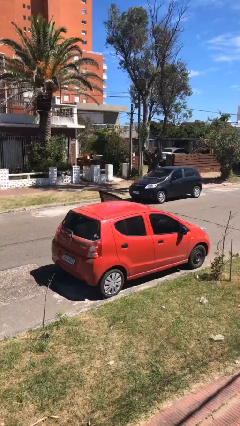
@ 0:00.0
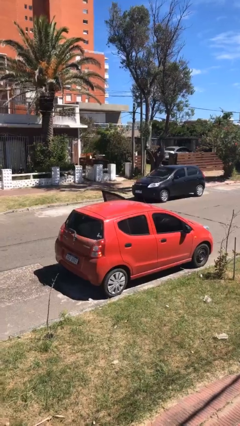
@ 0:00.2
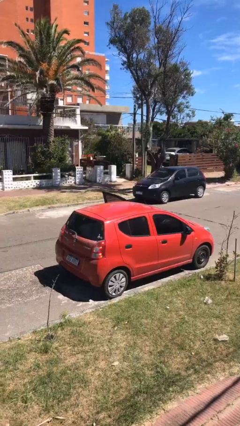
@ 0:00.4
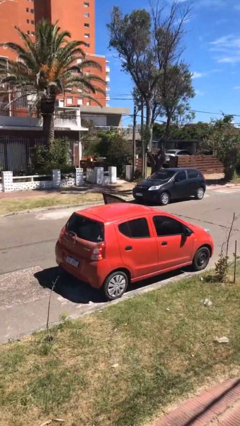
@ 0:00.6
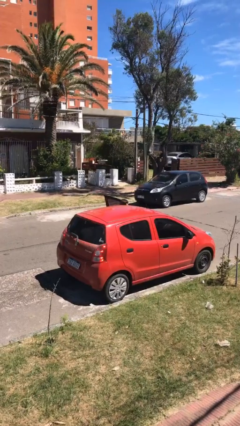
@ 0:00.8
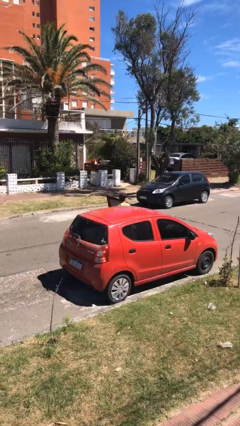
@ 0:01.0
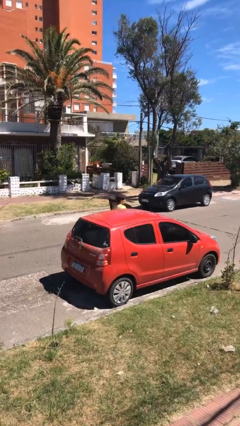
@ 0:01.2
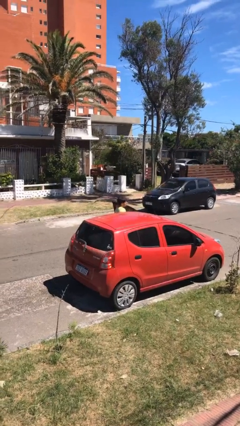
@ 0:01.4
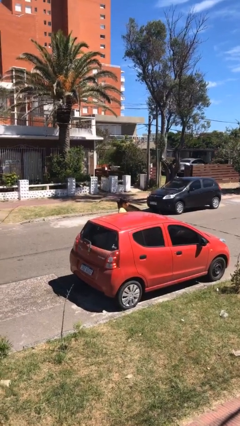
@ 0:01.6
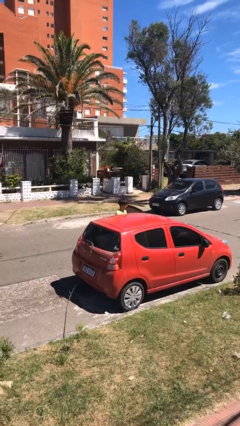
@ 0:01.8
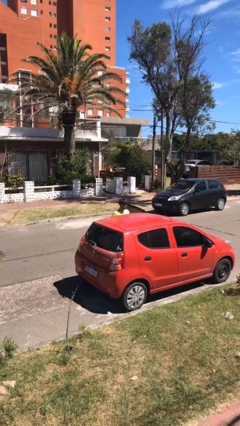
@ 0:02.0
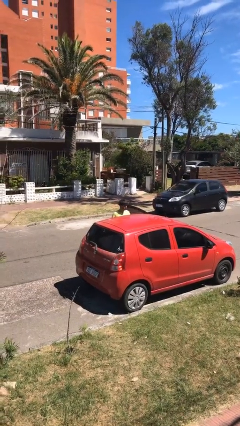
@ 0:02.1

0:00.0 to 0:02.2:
person exits car

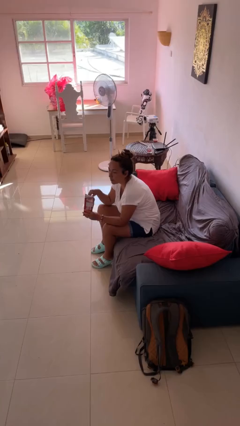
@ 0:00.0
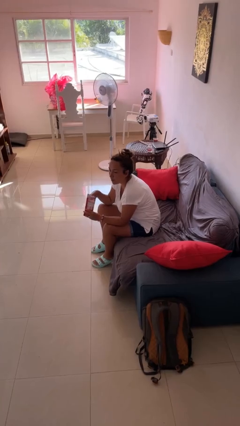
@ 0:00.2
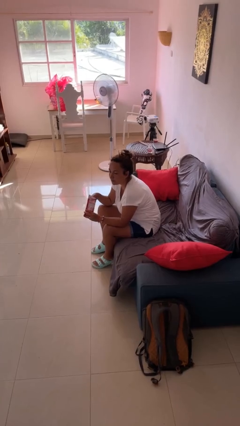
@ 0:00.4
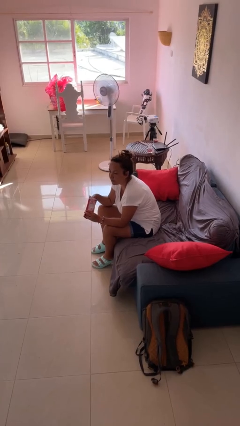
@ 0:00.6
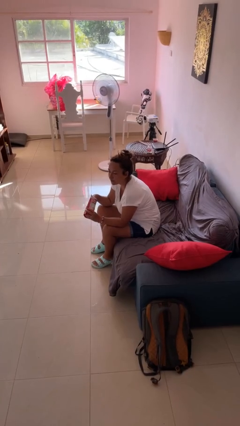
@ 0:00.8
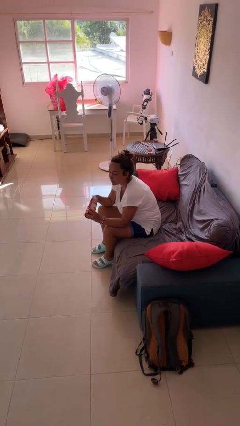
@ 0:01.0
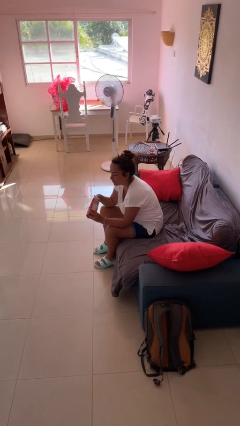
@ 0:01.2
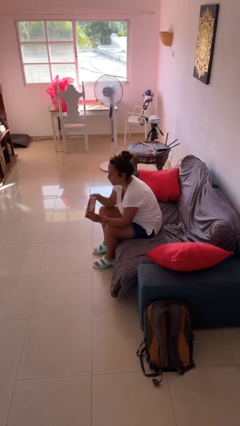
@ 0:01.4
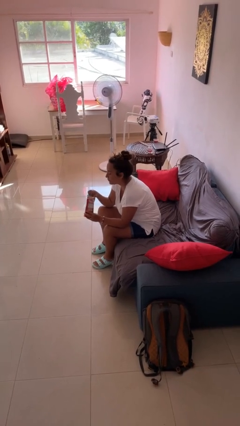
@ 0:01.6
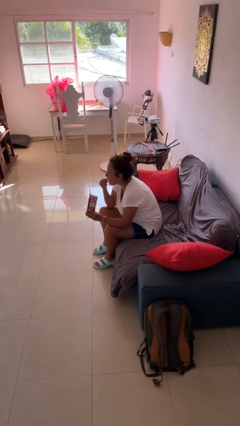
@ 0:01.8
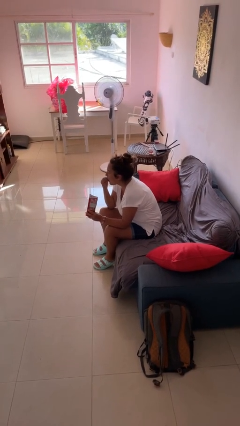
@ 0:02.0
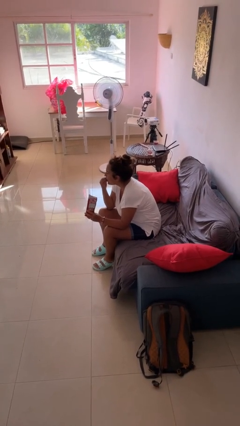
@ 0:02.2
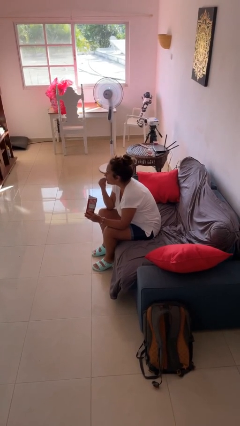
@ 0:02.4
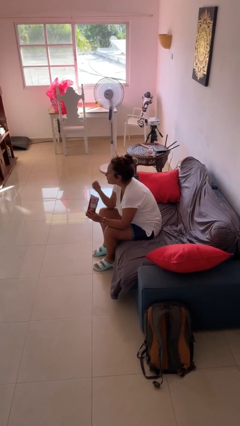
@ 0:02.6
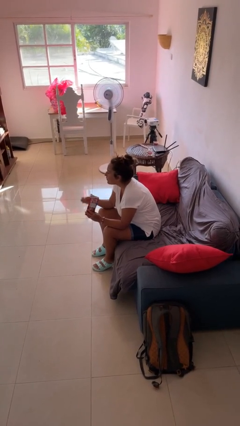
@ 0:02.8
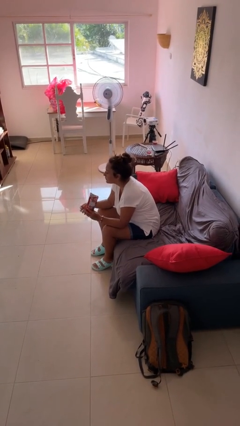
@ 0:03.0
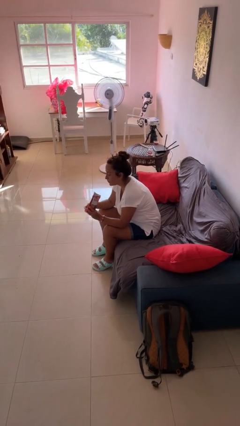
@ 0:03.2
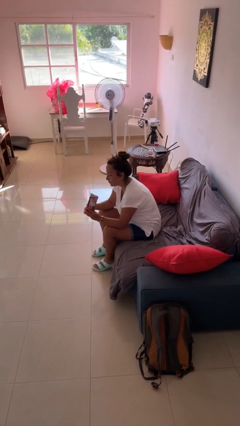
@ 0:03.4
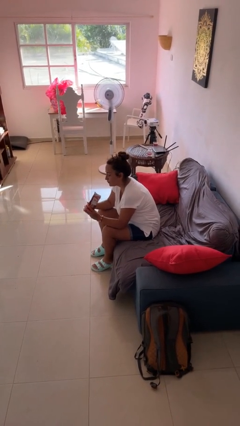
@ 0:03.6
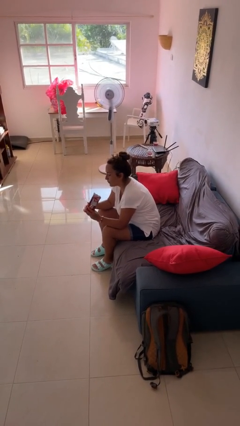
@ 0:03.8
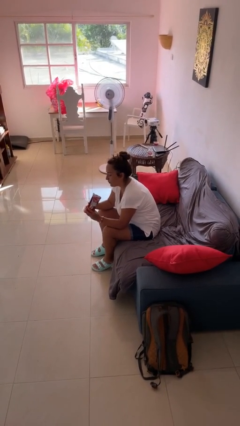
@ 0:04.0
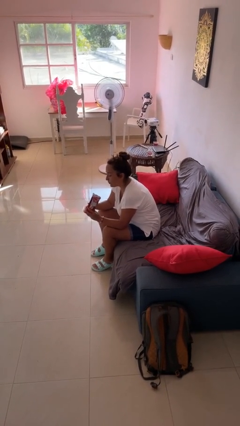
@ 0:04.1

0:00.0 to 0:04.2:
person eats snack from bag

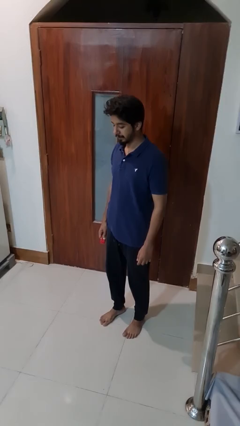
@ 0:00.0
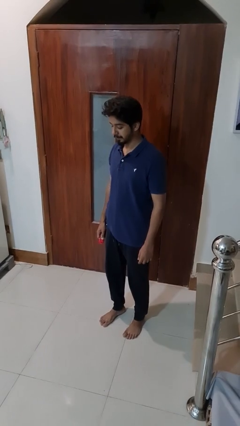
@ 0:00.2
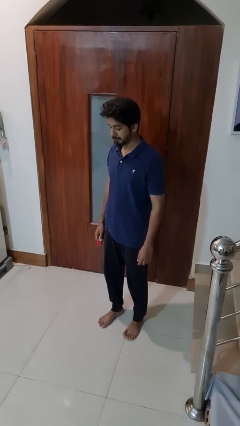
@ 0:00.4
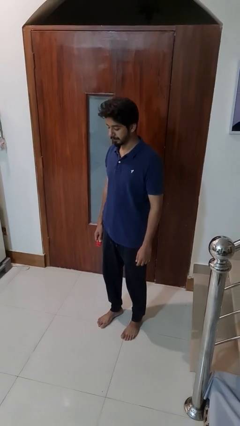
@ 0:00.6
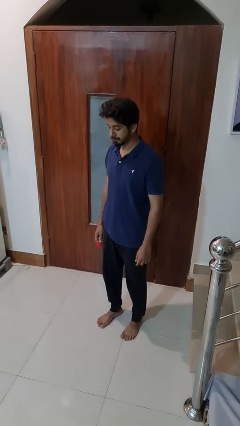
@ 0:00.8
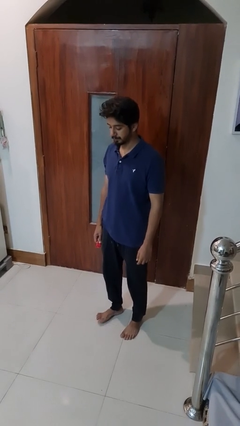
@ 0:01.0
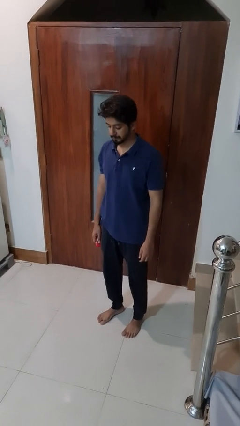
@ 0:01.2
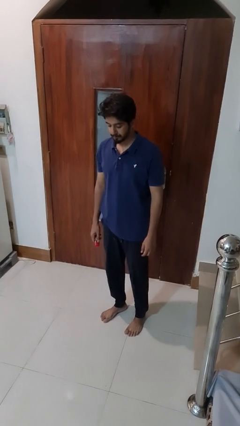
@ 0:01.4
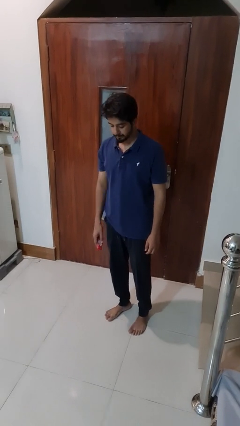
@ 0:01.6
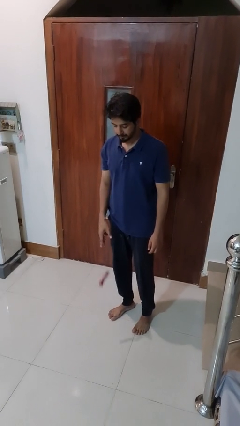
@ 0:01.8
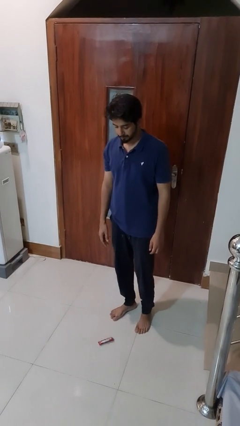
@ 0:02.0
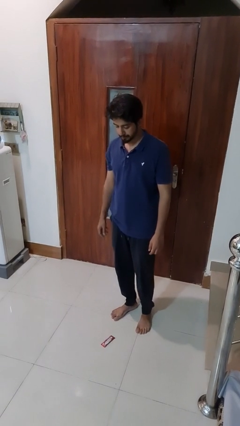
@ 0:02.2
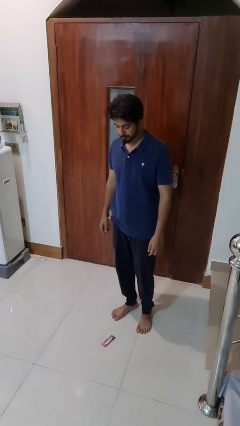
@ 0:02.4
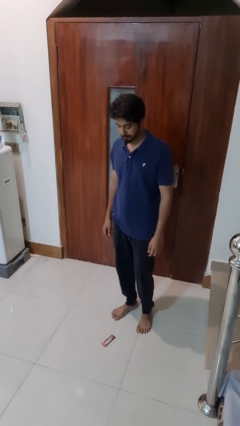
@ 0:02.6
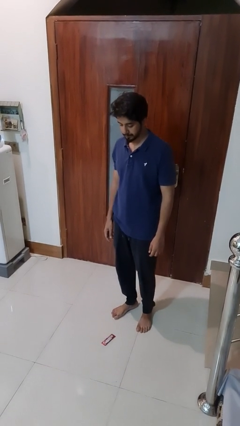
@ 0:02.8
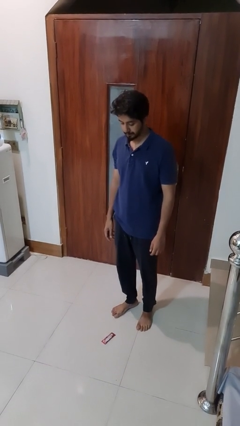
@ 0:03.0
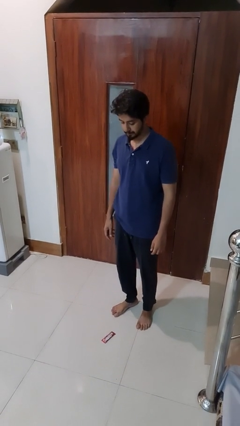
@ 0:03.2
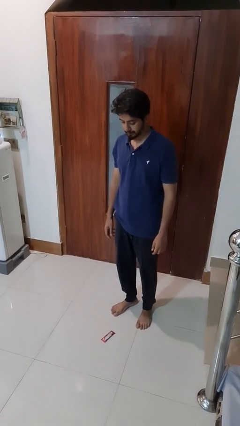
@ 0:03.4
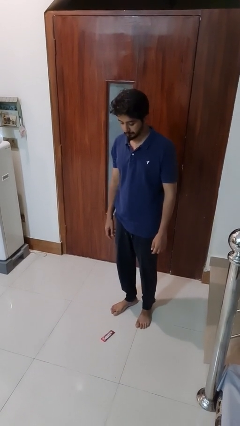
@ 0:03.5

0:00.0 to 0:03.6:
person throws object to ground

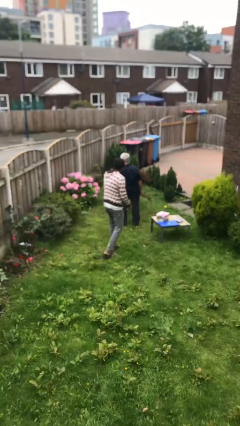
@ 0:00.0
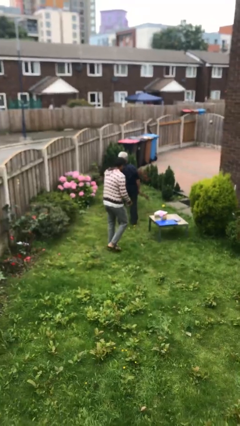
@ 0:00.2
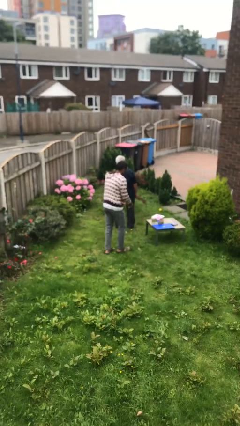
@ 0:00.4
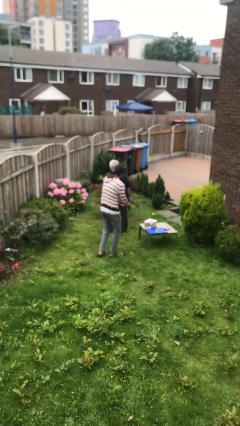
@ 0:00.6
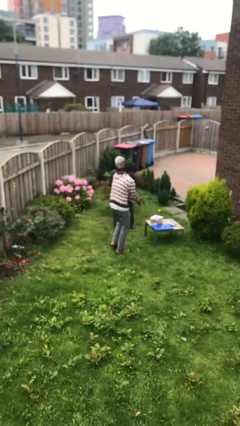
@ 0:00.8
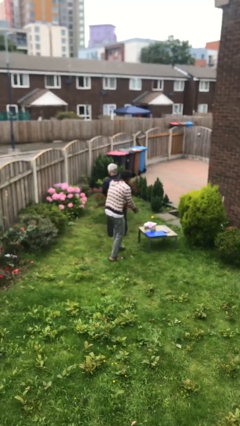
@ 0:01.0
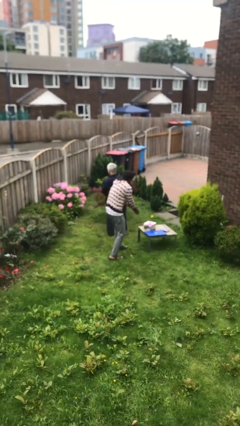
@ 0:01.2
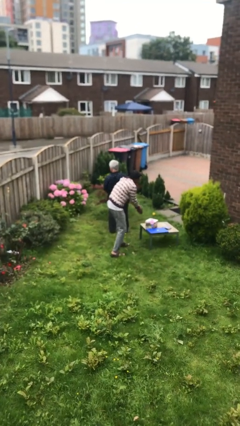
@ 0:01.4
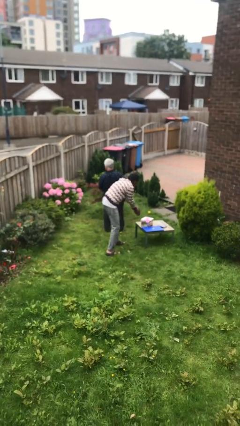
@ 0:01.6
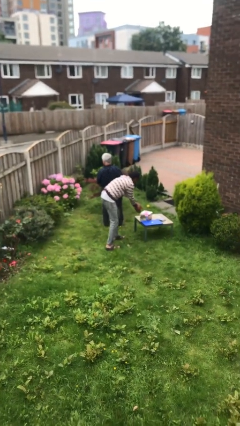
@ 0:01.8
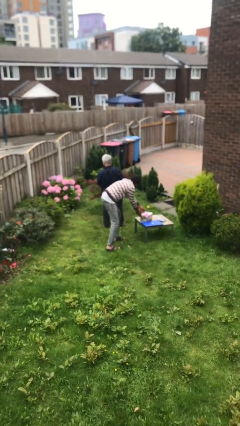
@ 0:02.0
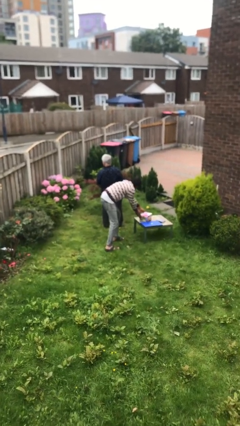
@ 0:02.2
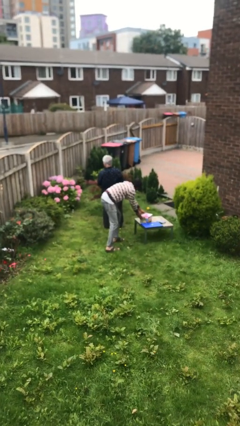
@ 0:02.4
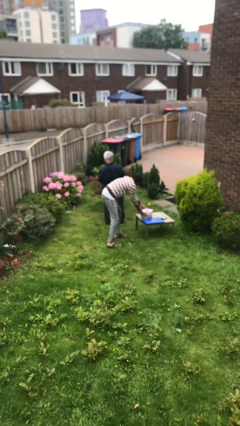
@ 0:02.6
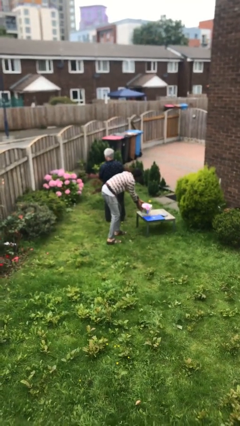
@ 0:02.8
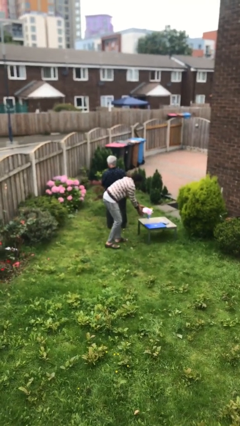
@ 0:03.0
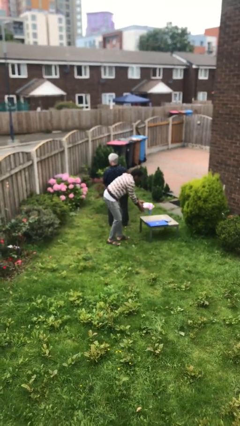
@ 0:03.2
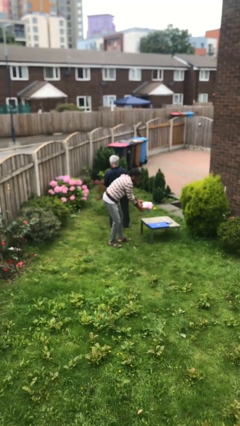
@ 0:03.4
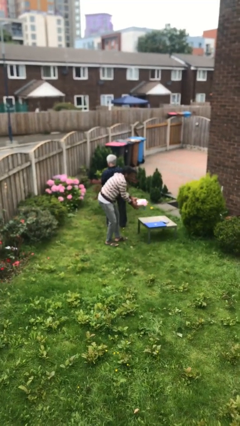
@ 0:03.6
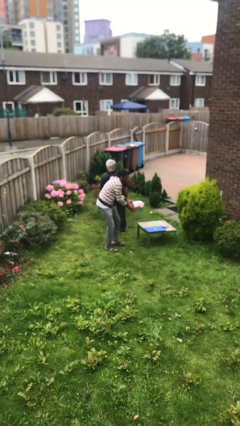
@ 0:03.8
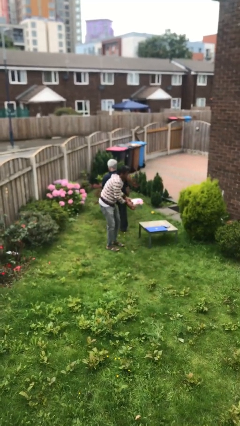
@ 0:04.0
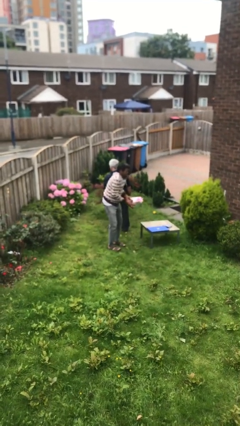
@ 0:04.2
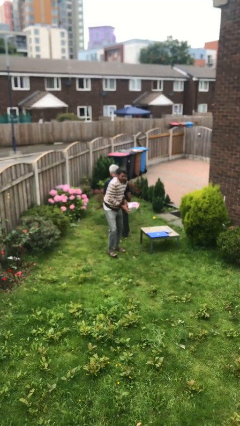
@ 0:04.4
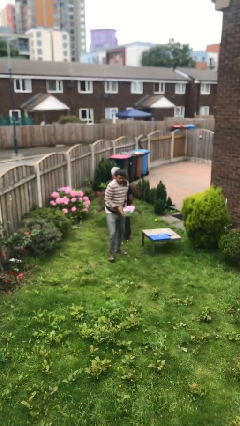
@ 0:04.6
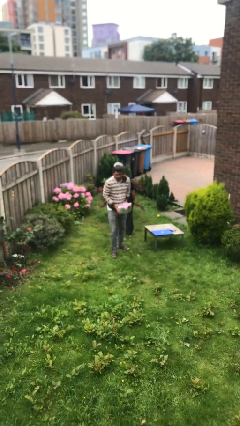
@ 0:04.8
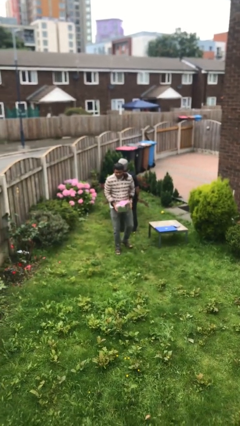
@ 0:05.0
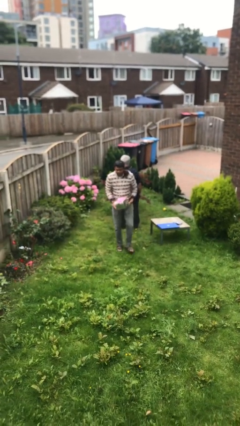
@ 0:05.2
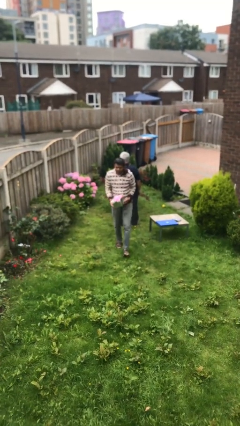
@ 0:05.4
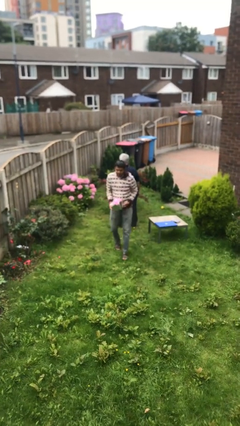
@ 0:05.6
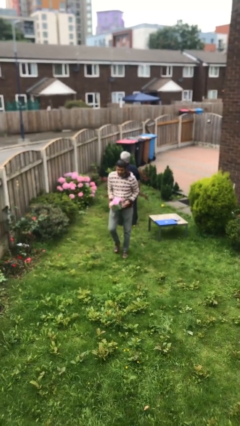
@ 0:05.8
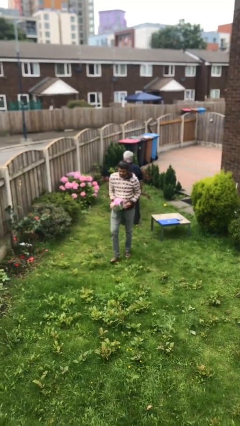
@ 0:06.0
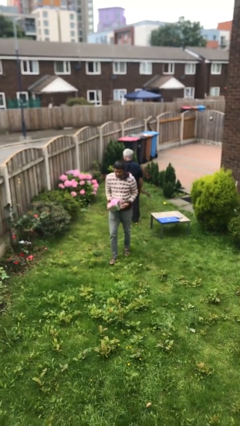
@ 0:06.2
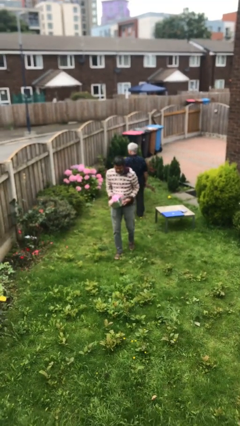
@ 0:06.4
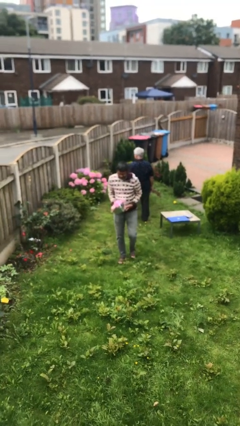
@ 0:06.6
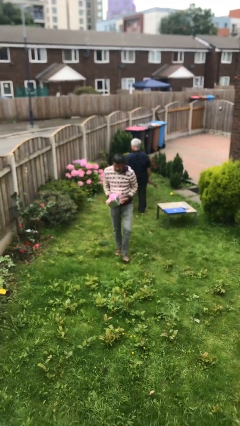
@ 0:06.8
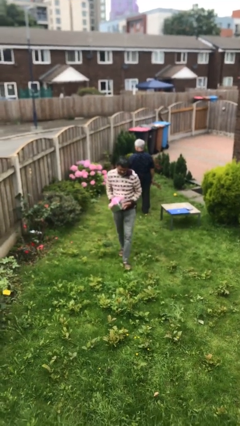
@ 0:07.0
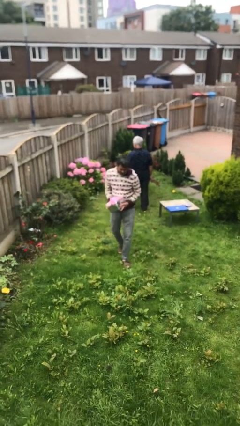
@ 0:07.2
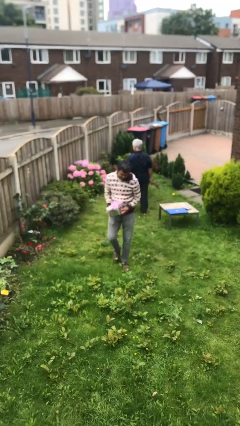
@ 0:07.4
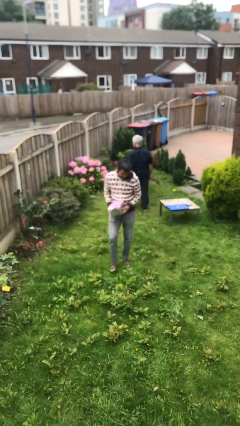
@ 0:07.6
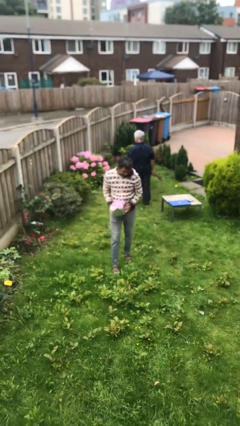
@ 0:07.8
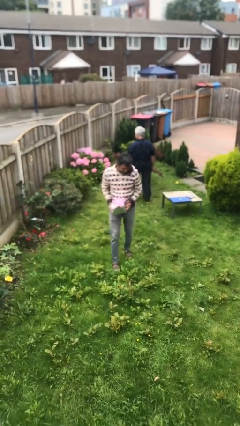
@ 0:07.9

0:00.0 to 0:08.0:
person steals object from person
